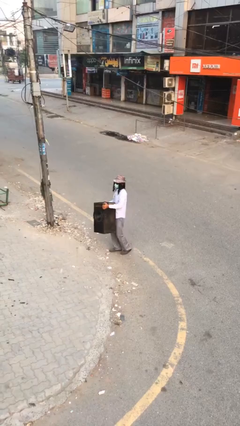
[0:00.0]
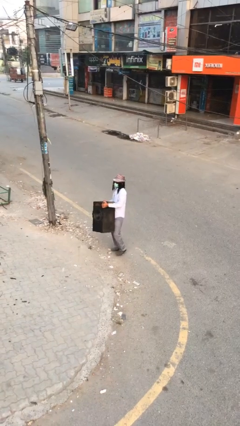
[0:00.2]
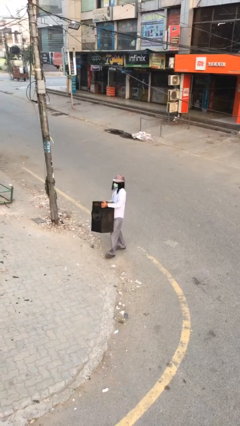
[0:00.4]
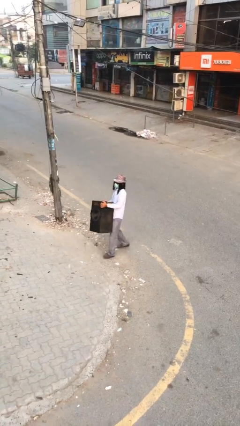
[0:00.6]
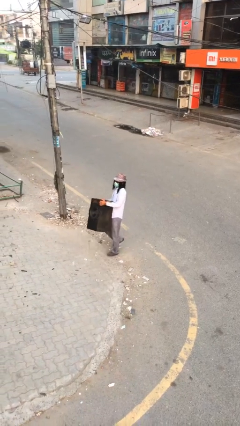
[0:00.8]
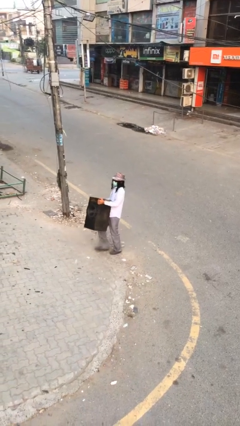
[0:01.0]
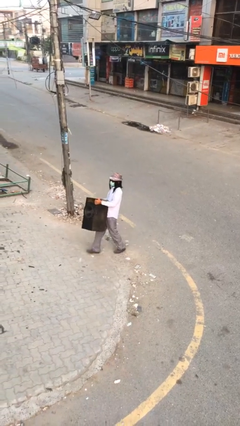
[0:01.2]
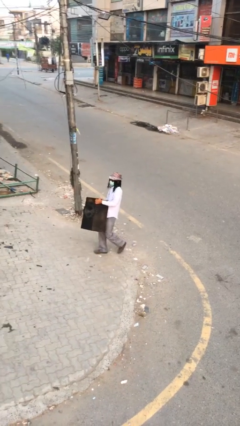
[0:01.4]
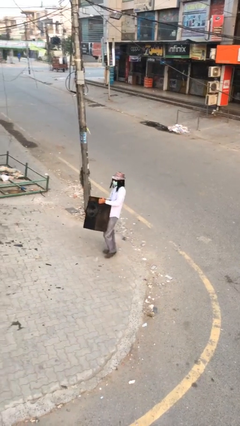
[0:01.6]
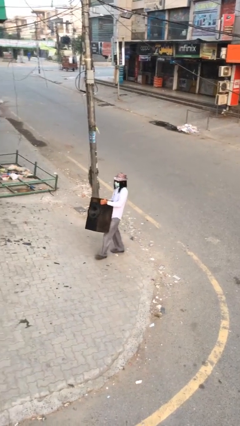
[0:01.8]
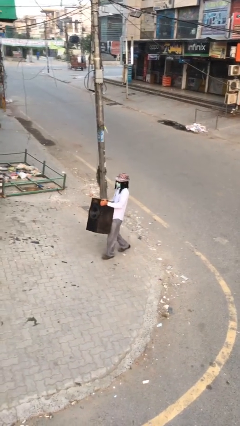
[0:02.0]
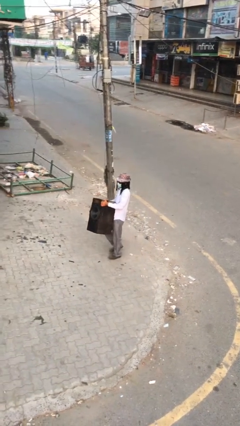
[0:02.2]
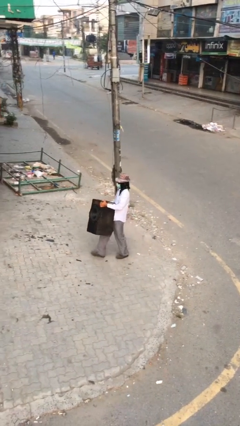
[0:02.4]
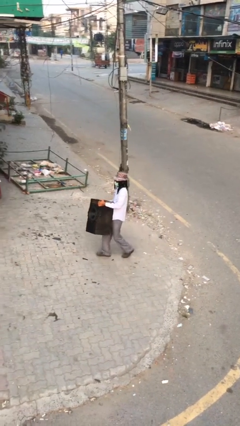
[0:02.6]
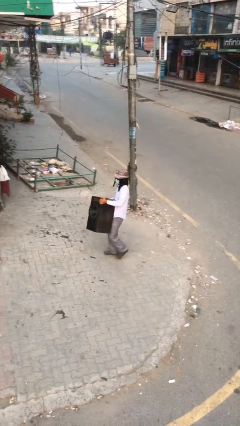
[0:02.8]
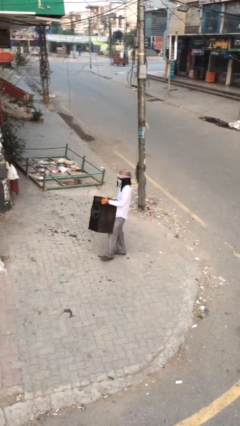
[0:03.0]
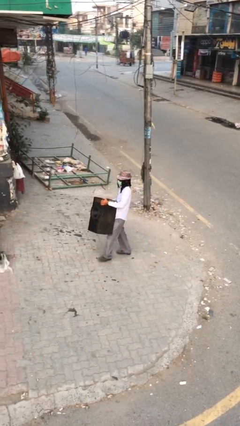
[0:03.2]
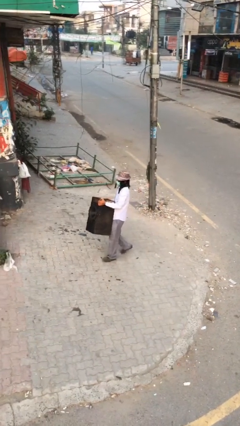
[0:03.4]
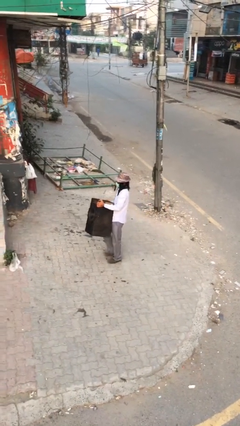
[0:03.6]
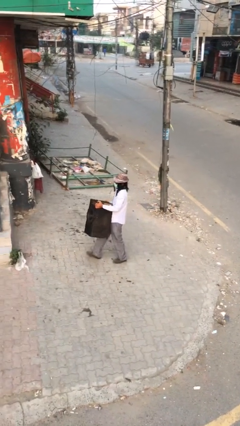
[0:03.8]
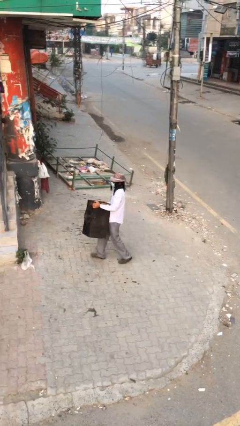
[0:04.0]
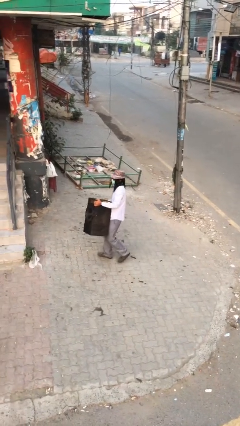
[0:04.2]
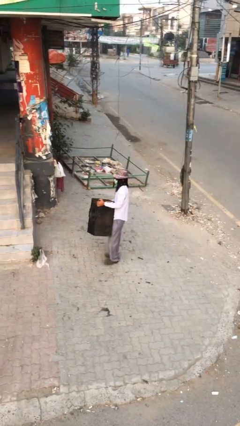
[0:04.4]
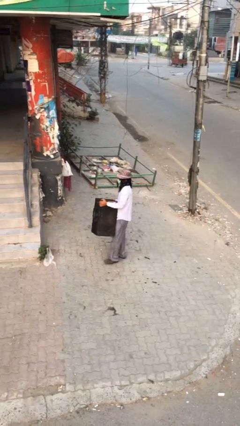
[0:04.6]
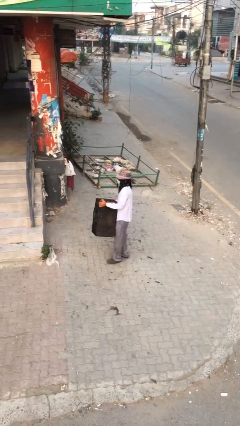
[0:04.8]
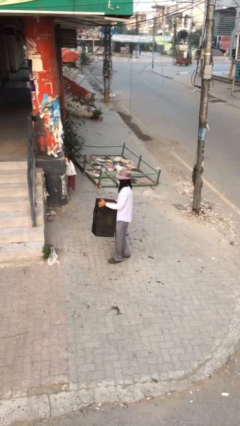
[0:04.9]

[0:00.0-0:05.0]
person carries heavy object

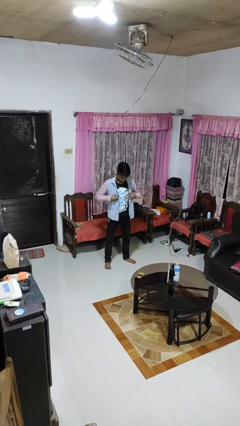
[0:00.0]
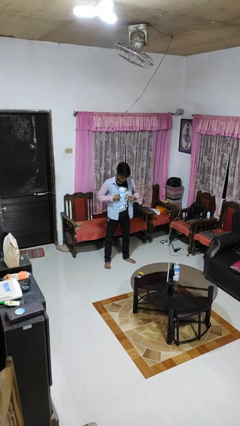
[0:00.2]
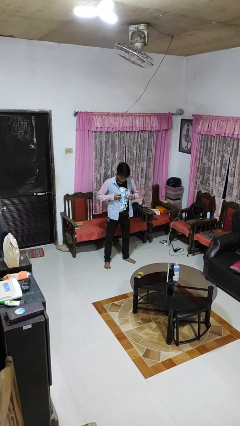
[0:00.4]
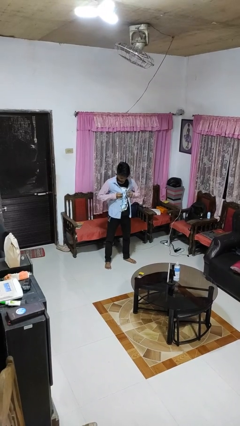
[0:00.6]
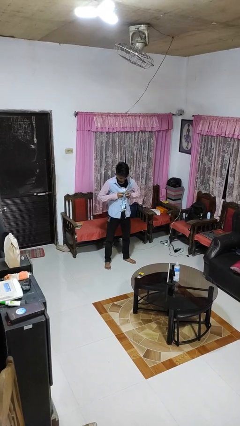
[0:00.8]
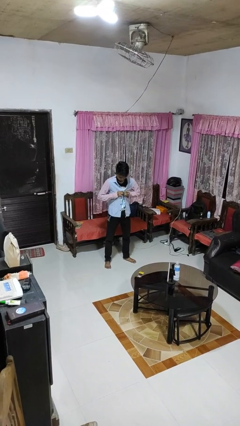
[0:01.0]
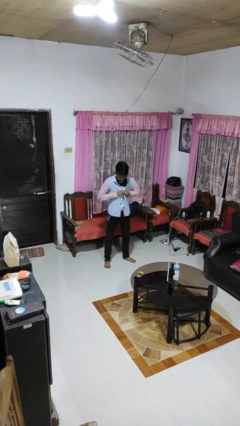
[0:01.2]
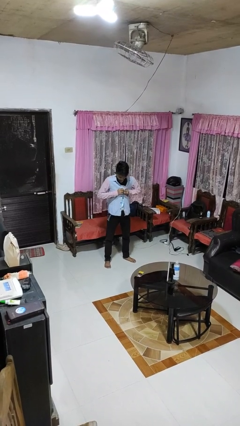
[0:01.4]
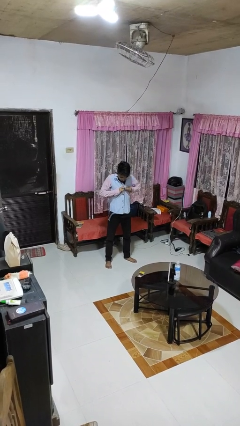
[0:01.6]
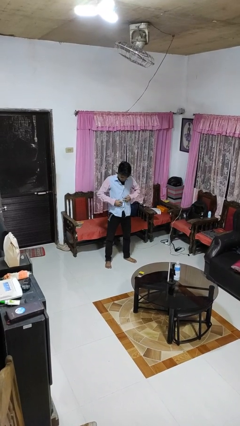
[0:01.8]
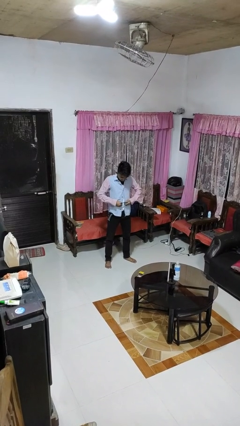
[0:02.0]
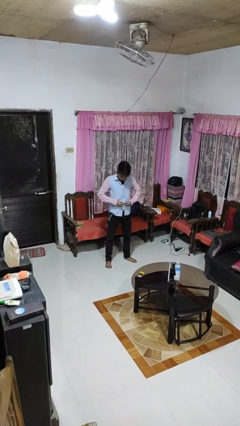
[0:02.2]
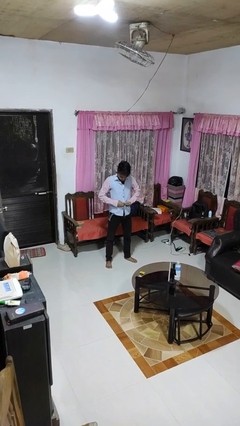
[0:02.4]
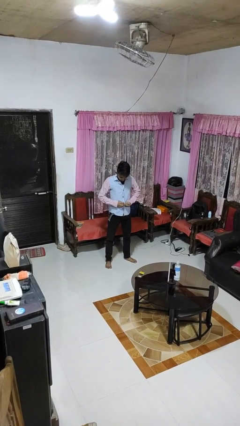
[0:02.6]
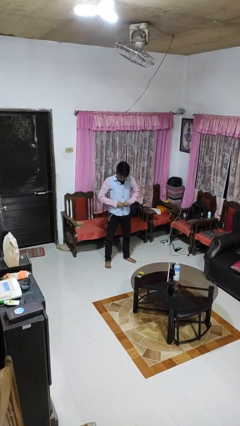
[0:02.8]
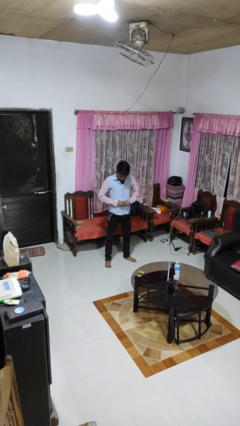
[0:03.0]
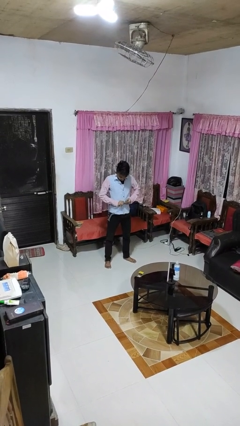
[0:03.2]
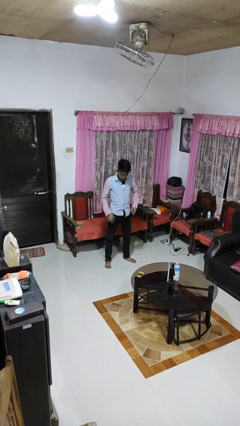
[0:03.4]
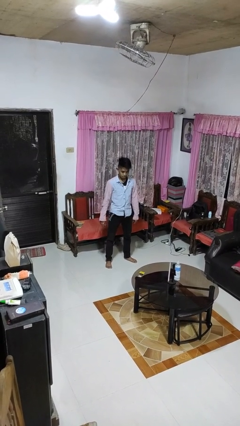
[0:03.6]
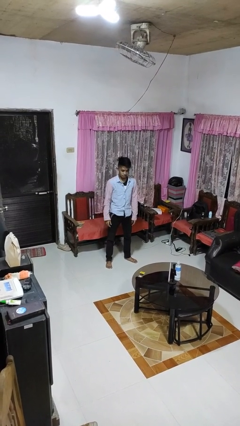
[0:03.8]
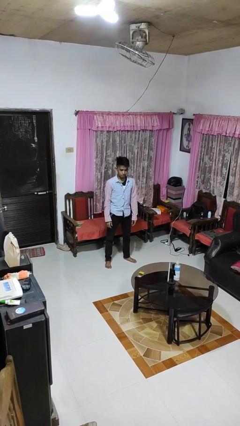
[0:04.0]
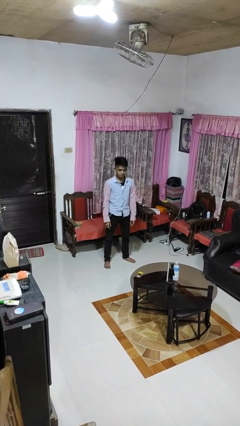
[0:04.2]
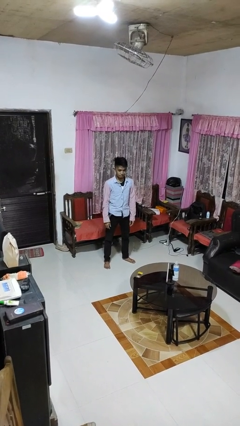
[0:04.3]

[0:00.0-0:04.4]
person buttons shirt

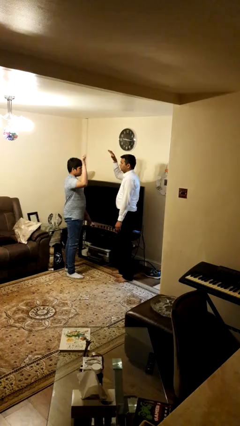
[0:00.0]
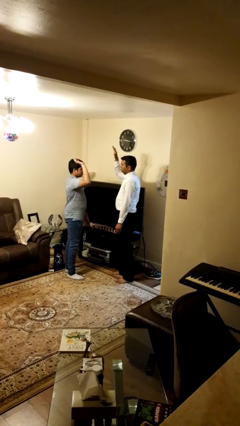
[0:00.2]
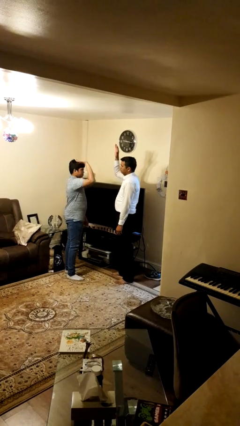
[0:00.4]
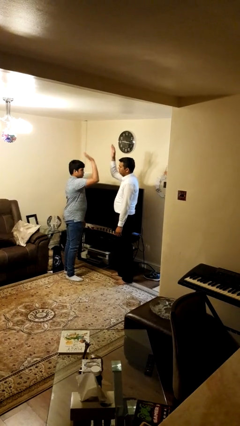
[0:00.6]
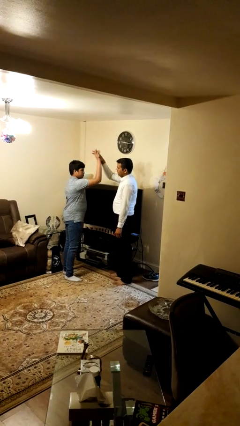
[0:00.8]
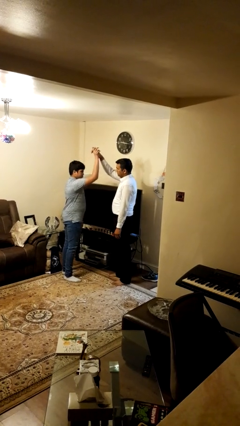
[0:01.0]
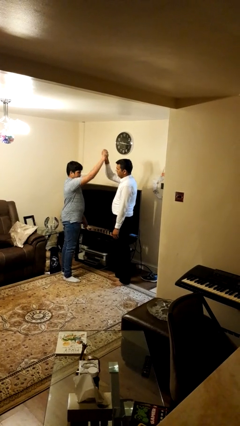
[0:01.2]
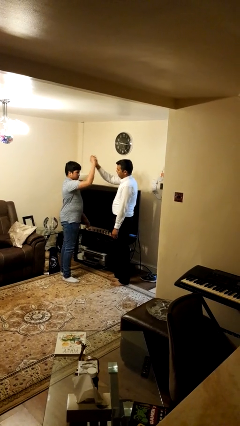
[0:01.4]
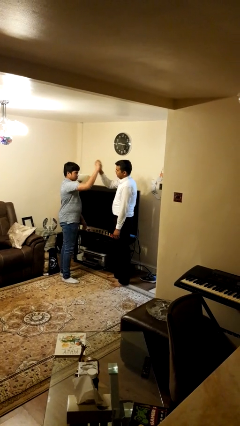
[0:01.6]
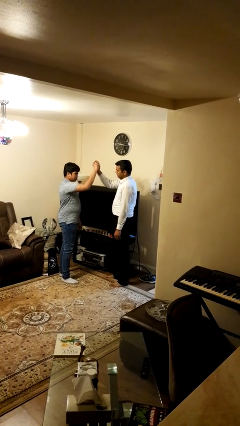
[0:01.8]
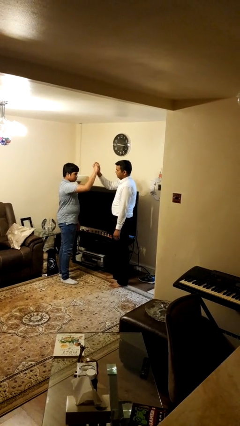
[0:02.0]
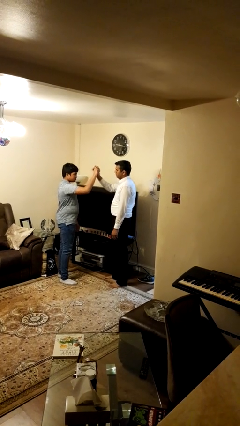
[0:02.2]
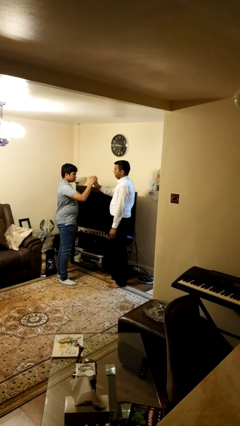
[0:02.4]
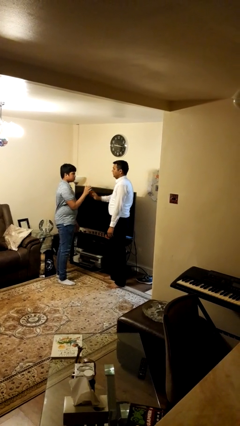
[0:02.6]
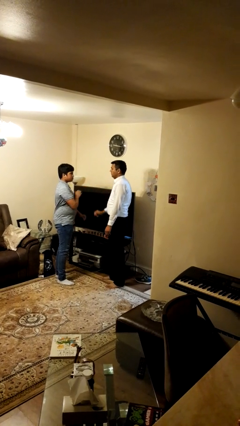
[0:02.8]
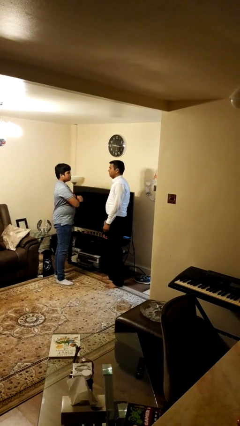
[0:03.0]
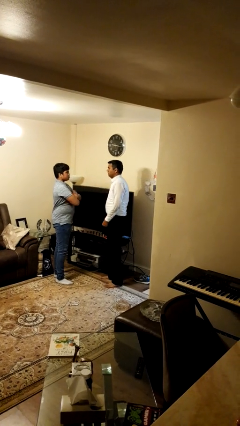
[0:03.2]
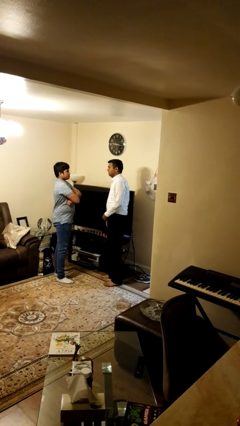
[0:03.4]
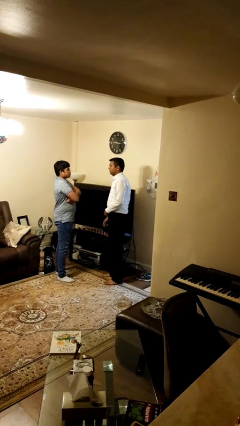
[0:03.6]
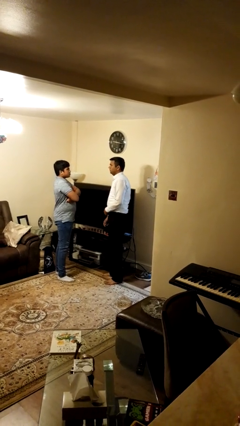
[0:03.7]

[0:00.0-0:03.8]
person highfives hand

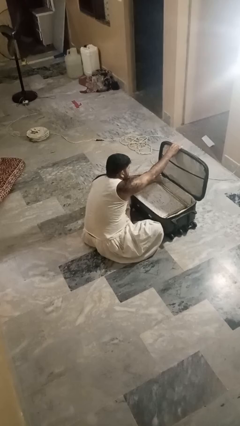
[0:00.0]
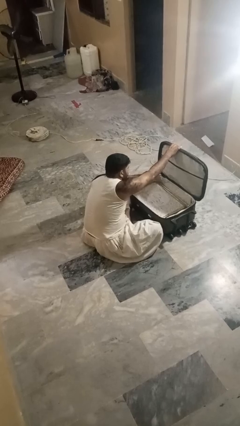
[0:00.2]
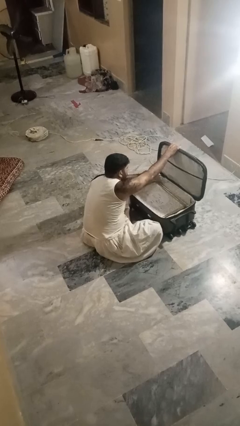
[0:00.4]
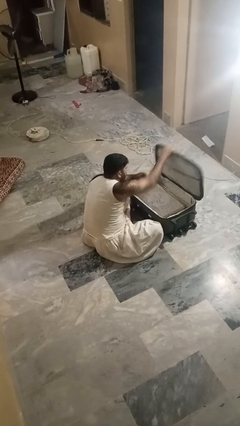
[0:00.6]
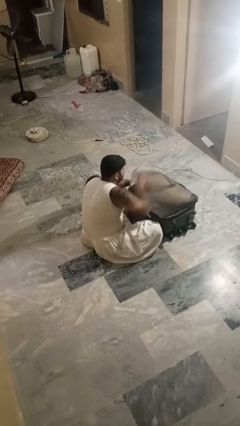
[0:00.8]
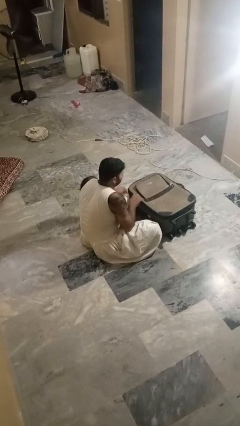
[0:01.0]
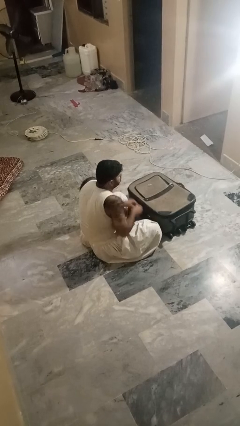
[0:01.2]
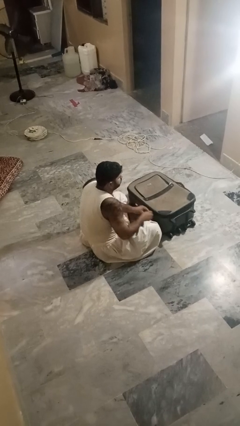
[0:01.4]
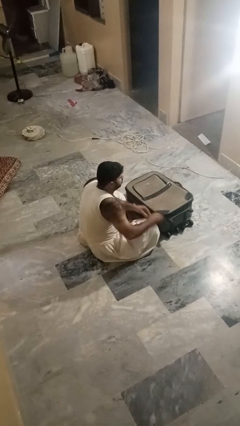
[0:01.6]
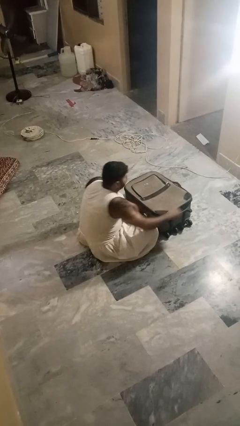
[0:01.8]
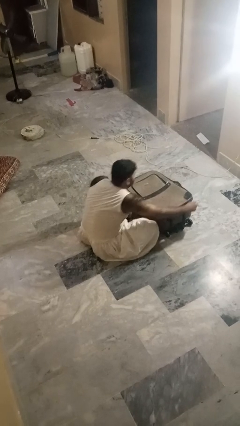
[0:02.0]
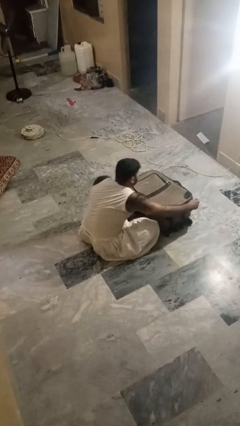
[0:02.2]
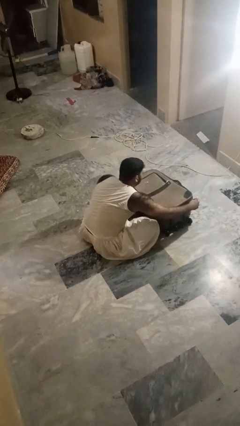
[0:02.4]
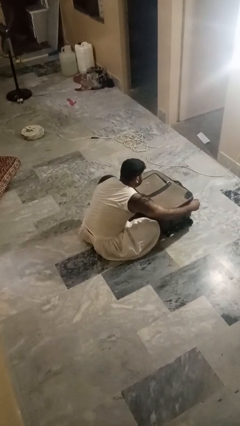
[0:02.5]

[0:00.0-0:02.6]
person closes suitcase

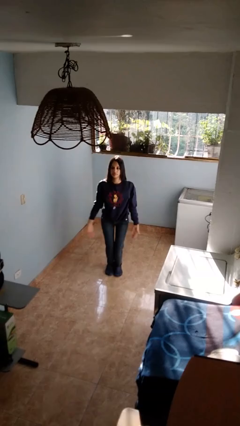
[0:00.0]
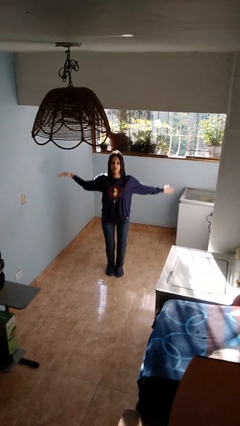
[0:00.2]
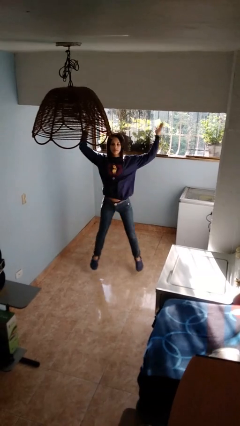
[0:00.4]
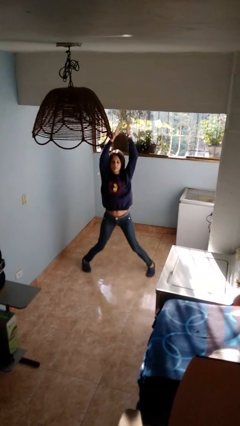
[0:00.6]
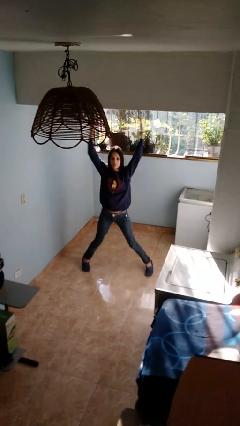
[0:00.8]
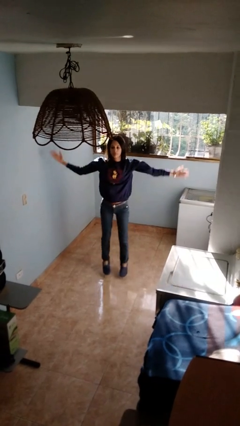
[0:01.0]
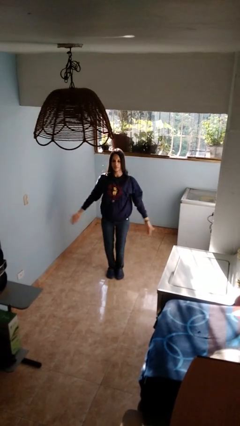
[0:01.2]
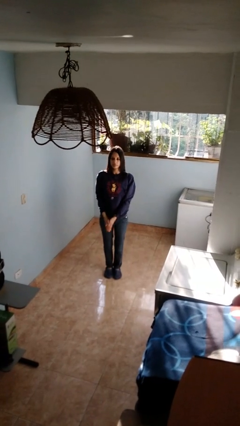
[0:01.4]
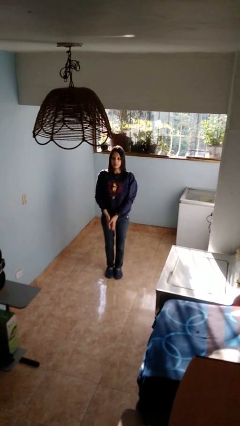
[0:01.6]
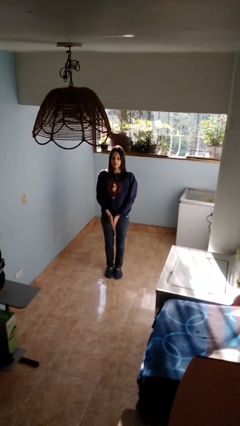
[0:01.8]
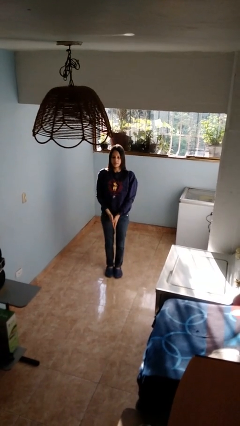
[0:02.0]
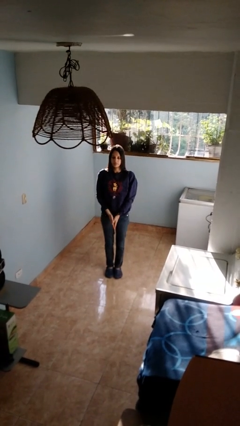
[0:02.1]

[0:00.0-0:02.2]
person exercises with jumping jacks
